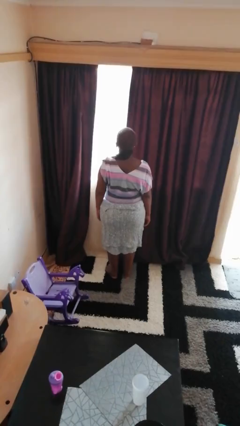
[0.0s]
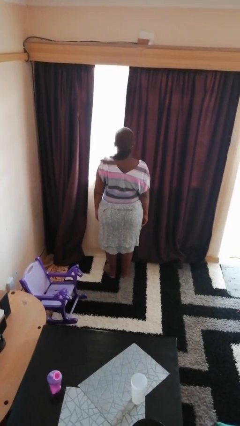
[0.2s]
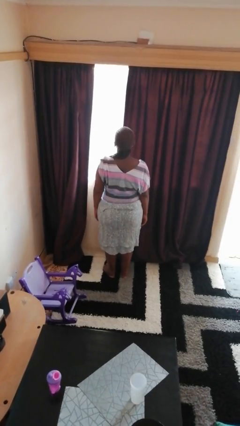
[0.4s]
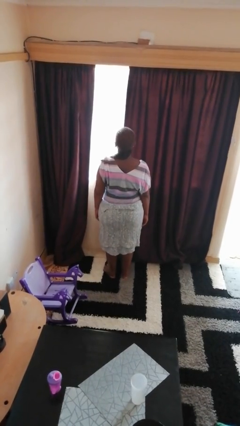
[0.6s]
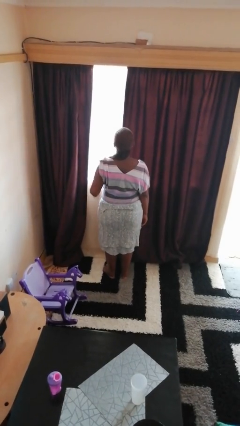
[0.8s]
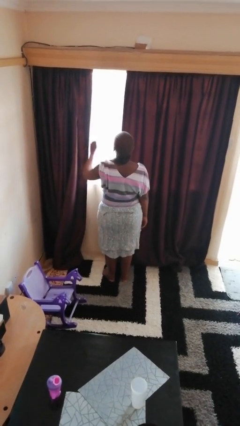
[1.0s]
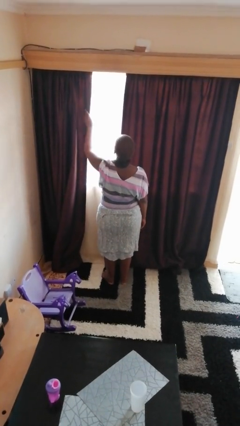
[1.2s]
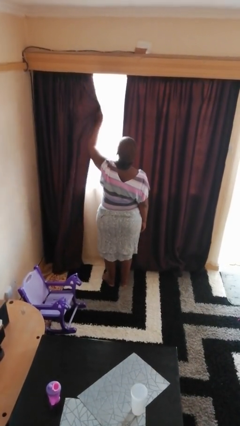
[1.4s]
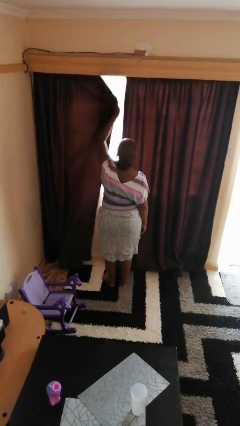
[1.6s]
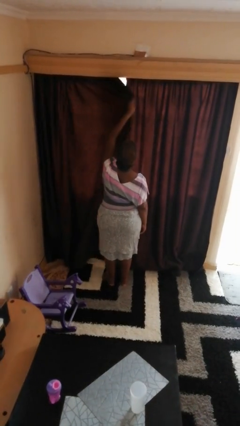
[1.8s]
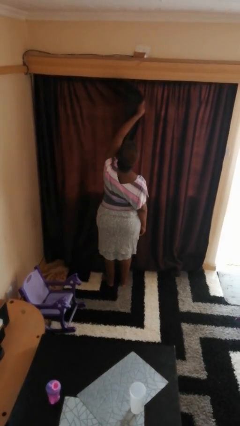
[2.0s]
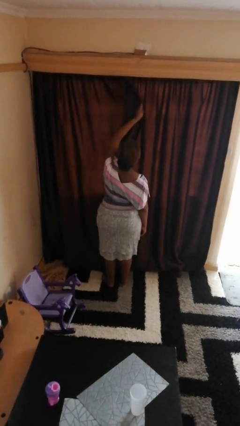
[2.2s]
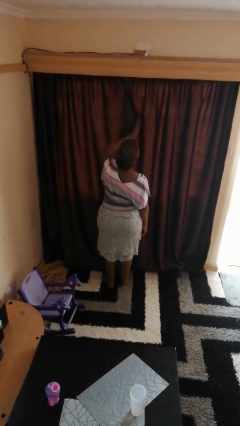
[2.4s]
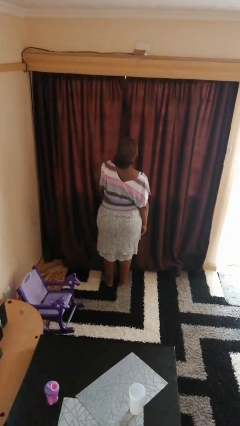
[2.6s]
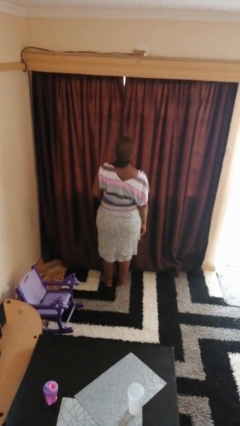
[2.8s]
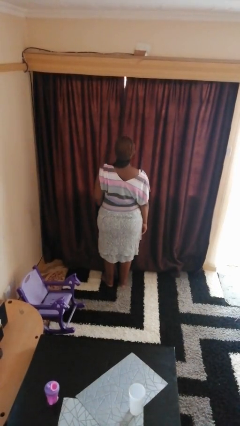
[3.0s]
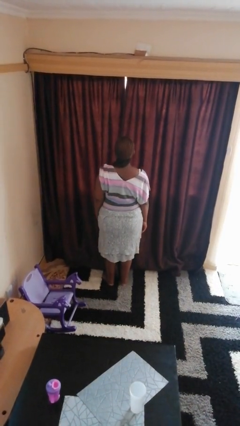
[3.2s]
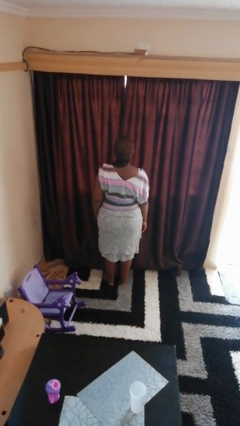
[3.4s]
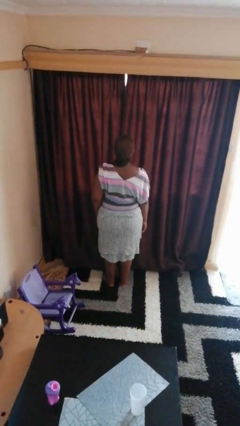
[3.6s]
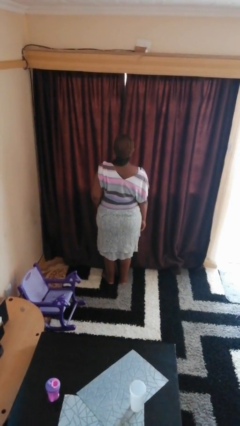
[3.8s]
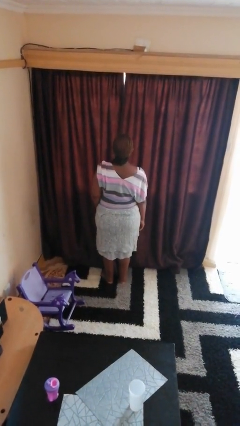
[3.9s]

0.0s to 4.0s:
person closes curtains

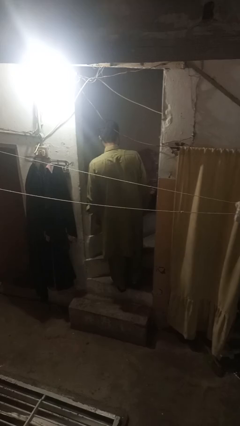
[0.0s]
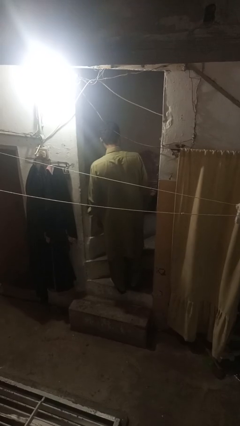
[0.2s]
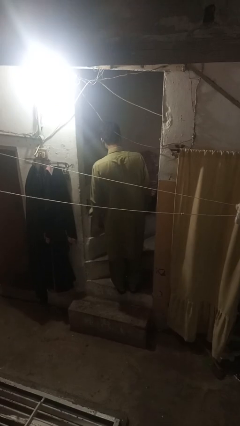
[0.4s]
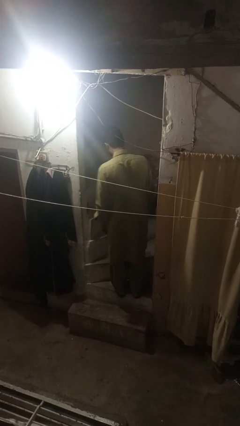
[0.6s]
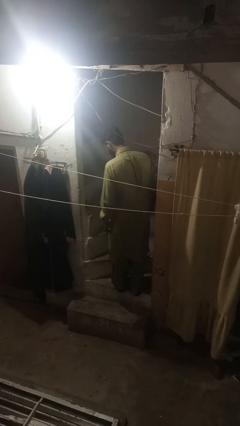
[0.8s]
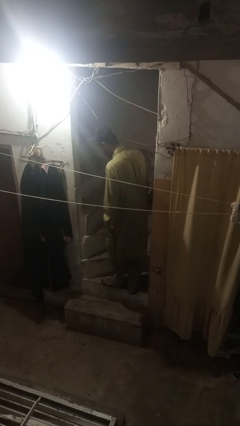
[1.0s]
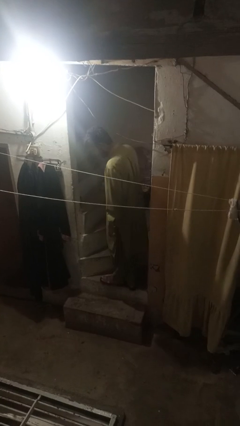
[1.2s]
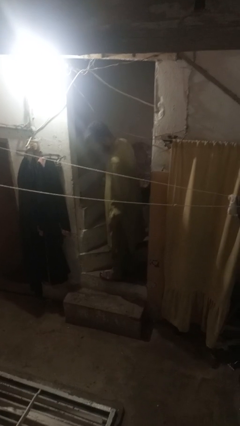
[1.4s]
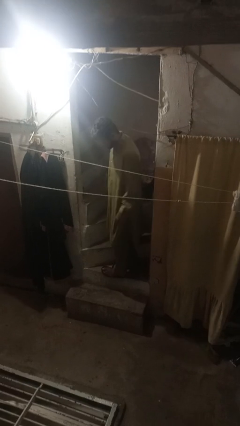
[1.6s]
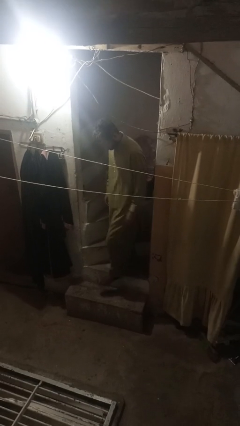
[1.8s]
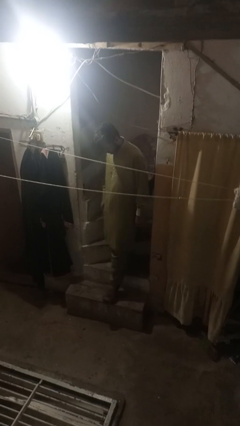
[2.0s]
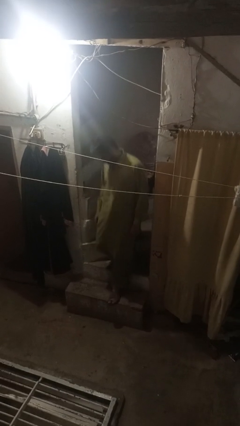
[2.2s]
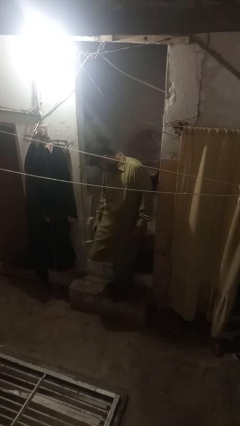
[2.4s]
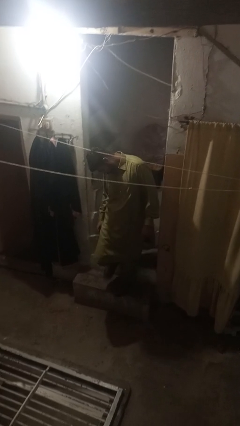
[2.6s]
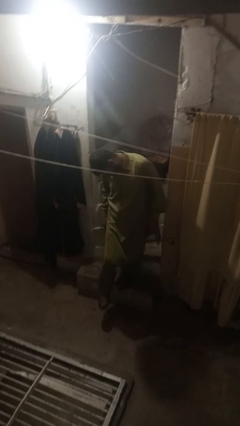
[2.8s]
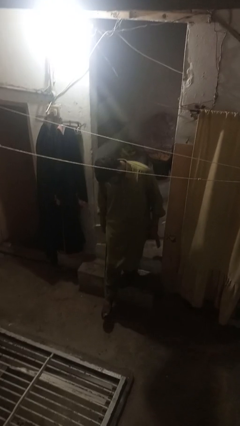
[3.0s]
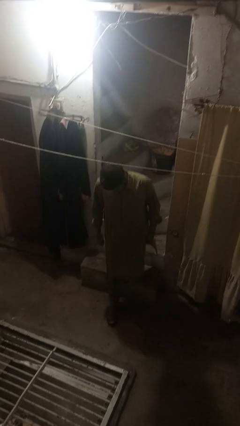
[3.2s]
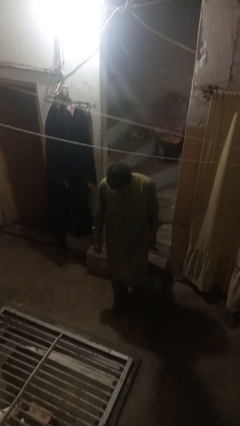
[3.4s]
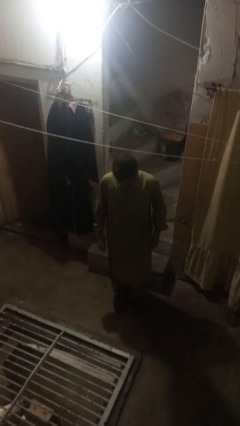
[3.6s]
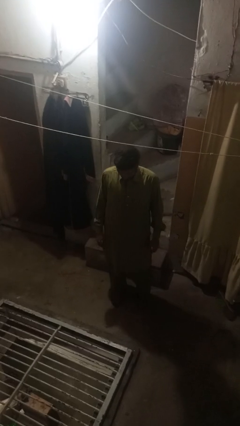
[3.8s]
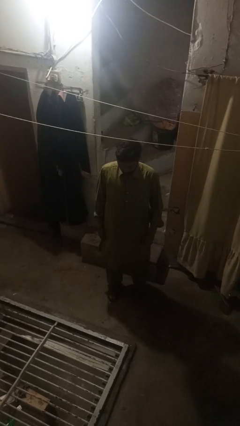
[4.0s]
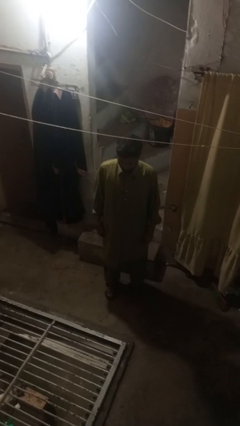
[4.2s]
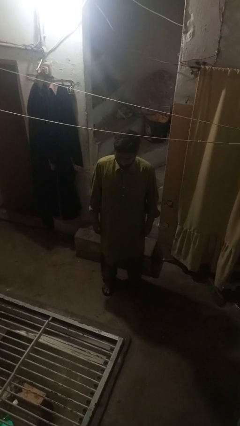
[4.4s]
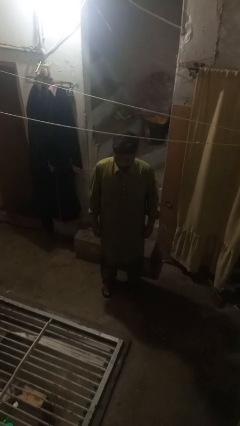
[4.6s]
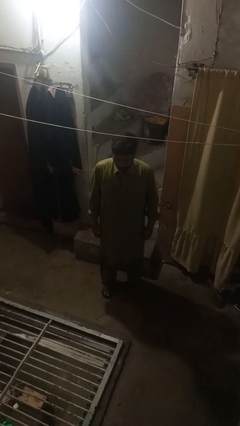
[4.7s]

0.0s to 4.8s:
person climbs down stairs

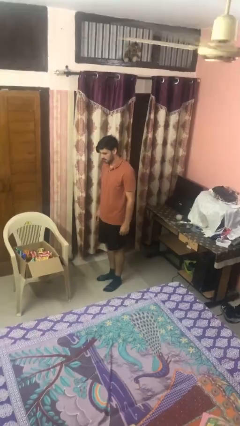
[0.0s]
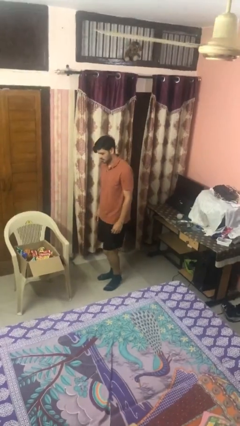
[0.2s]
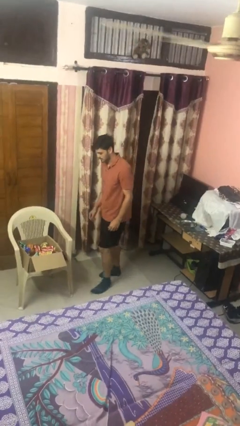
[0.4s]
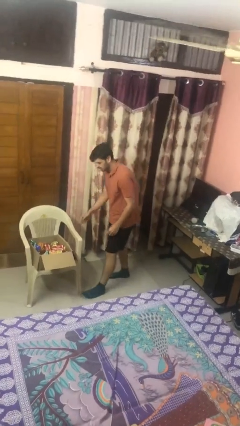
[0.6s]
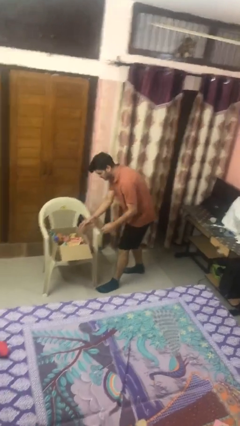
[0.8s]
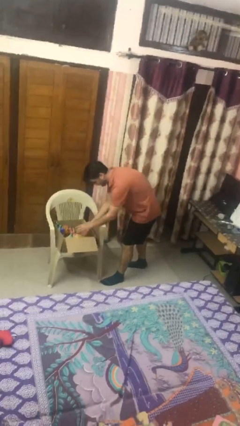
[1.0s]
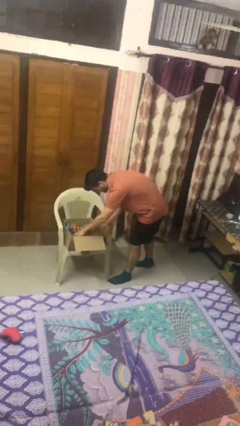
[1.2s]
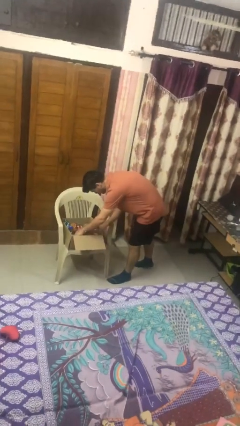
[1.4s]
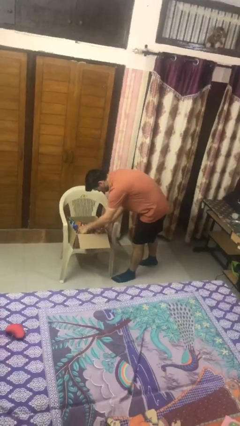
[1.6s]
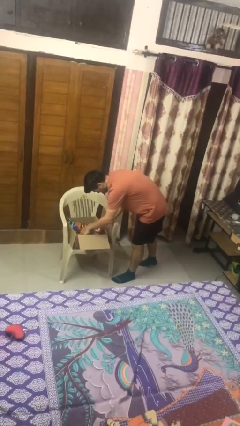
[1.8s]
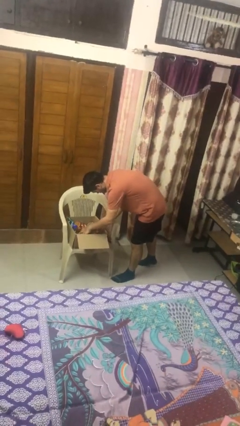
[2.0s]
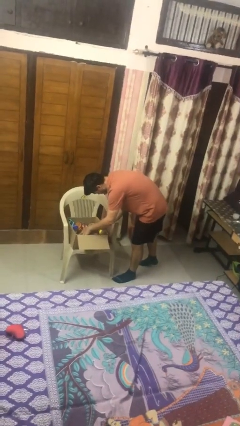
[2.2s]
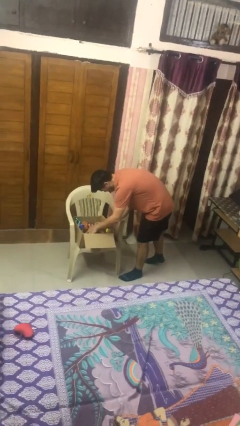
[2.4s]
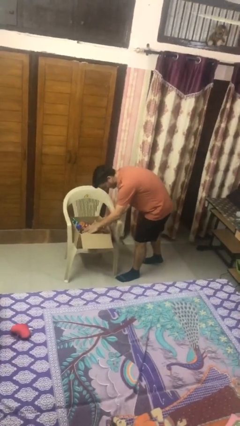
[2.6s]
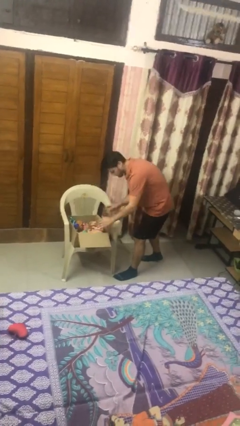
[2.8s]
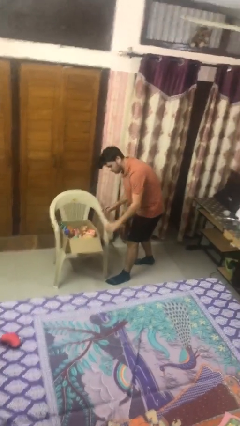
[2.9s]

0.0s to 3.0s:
person searches in box

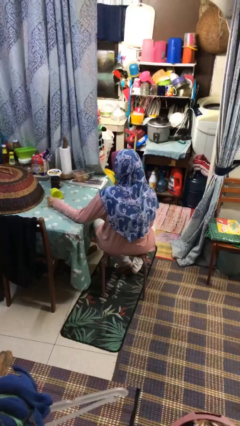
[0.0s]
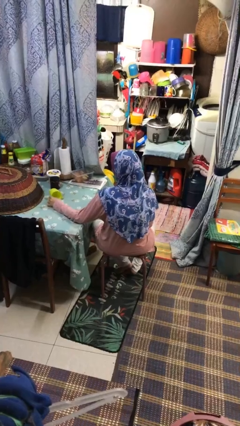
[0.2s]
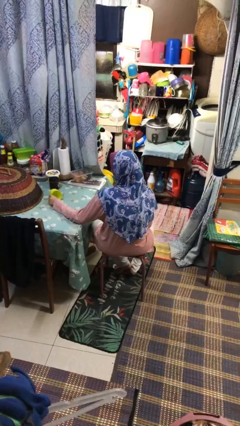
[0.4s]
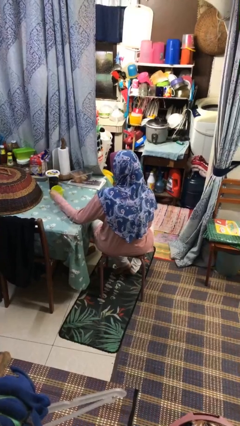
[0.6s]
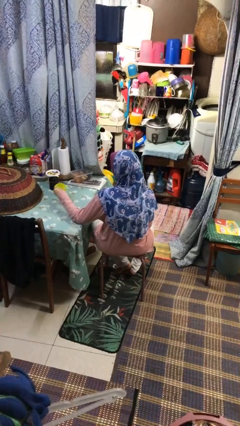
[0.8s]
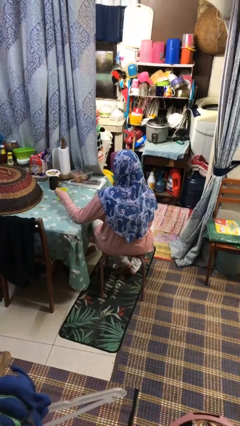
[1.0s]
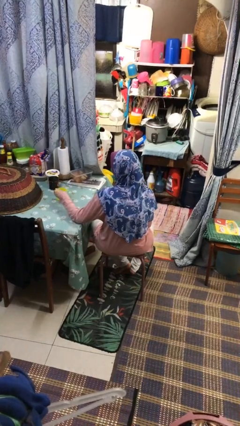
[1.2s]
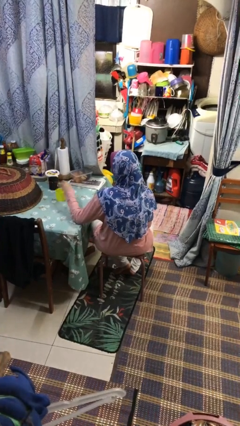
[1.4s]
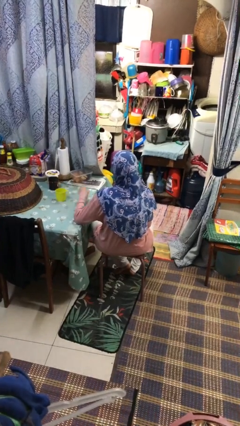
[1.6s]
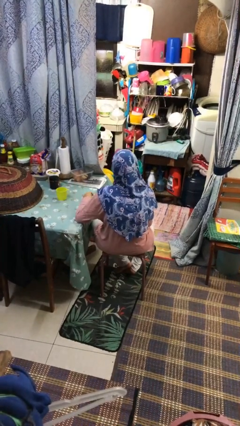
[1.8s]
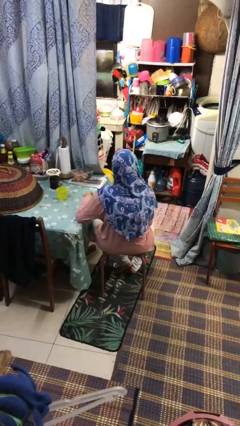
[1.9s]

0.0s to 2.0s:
person sets upright glass

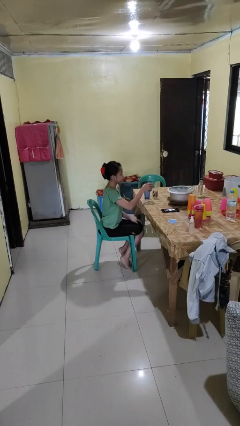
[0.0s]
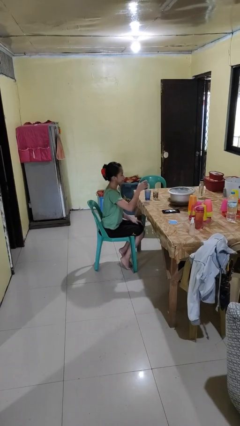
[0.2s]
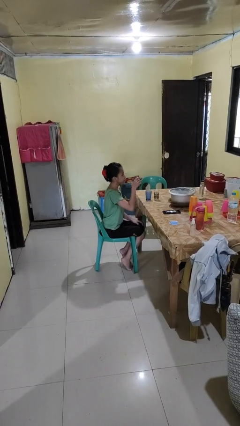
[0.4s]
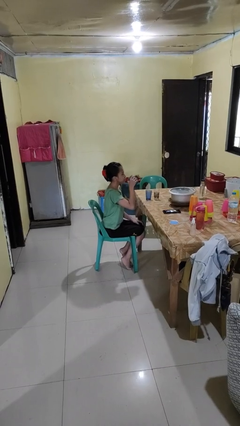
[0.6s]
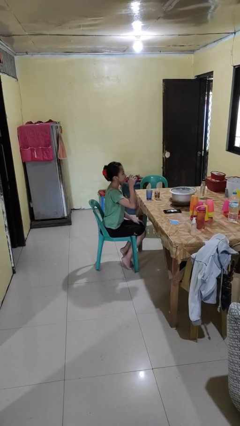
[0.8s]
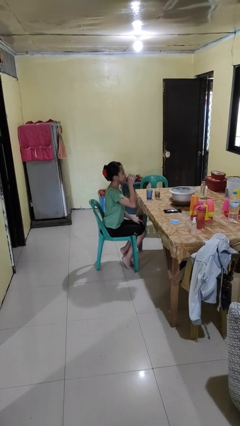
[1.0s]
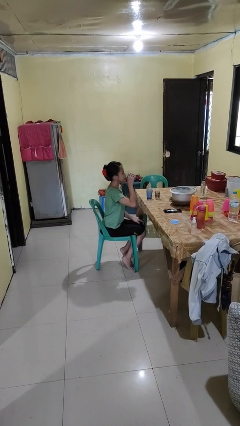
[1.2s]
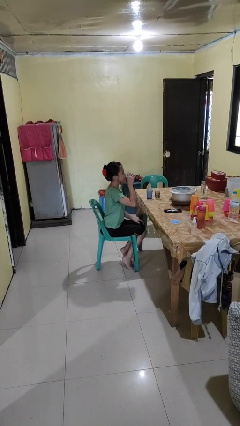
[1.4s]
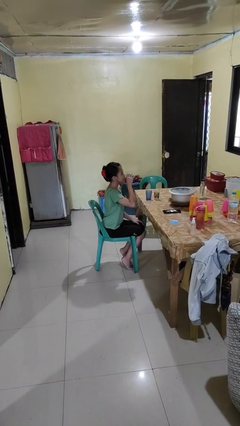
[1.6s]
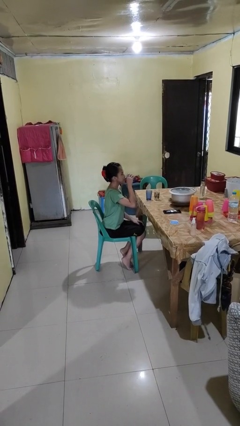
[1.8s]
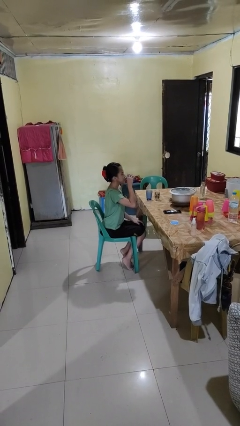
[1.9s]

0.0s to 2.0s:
person drinks from shotglass

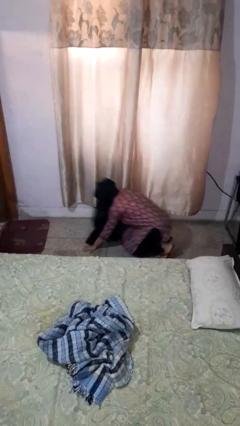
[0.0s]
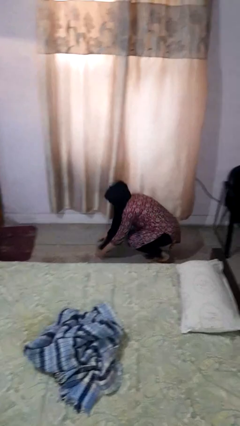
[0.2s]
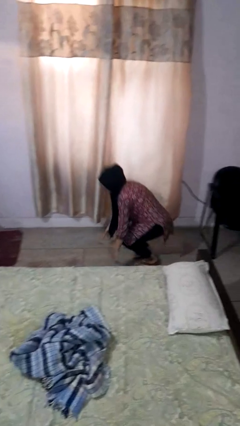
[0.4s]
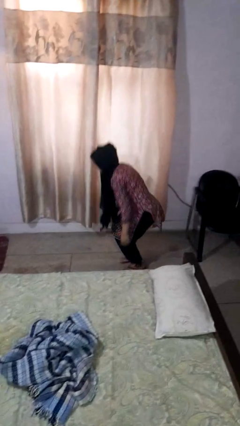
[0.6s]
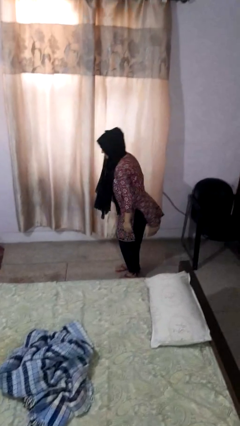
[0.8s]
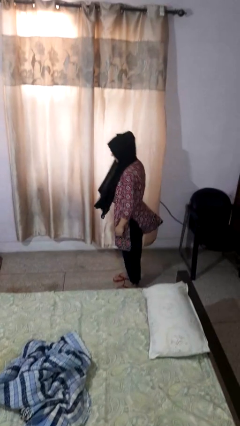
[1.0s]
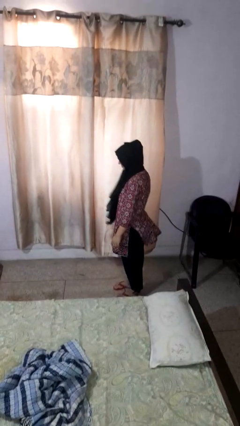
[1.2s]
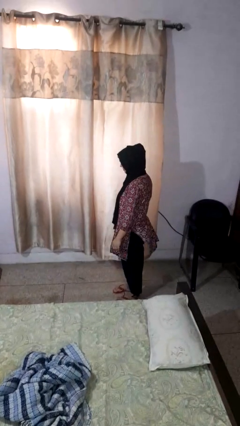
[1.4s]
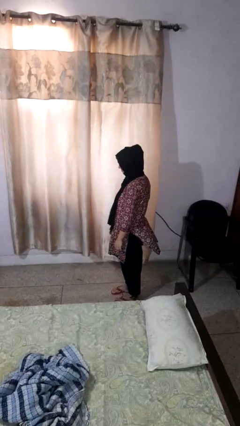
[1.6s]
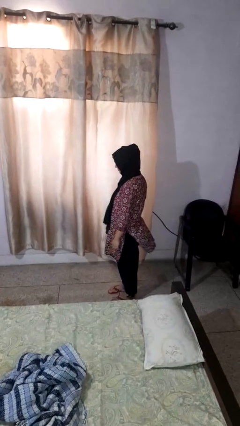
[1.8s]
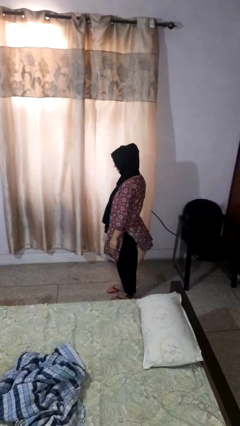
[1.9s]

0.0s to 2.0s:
person stands up from floor
